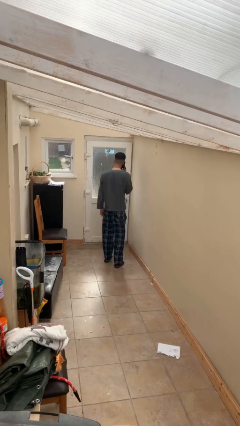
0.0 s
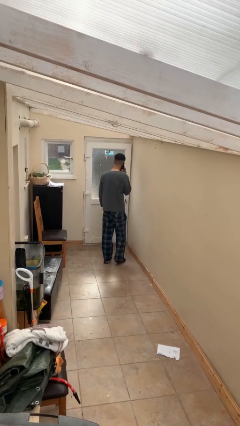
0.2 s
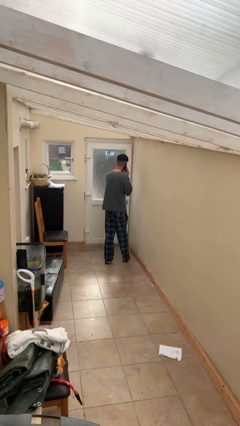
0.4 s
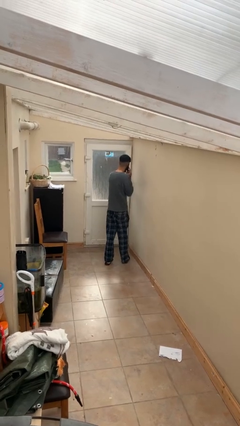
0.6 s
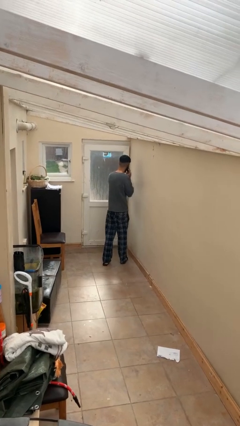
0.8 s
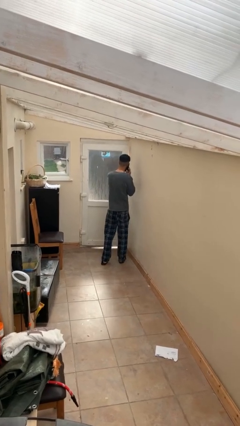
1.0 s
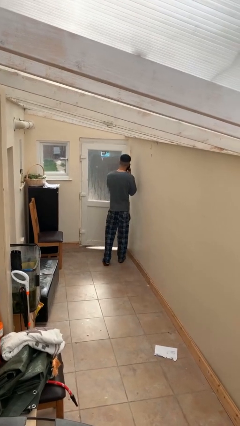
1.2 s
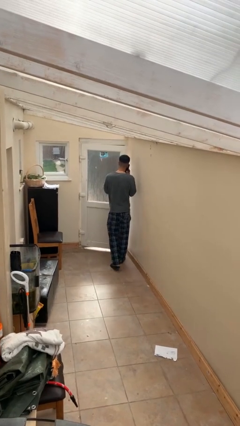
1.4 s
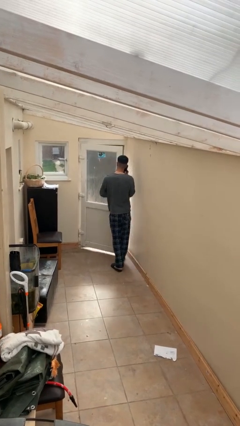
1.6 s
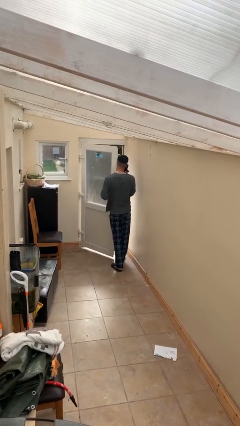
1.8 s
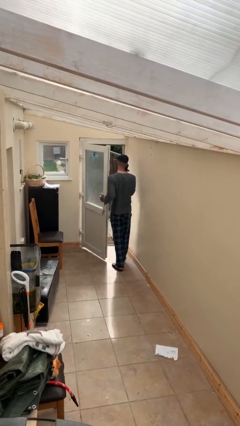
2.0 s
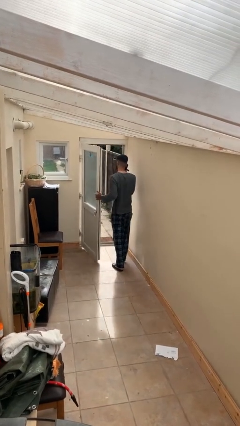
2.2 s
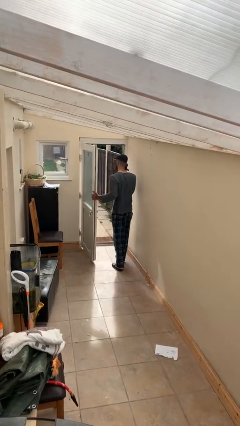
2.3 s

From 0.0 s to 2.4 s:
person opens facility door

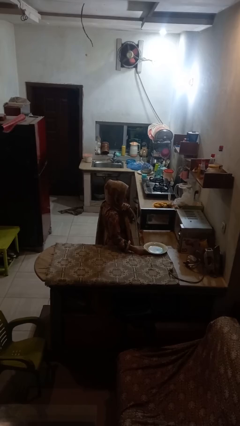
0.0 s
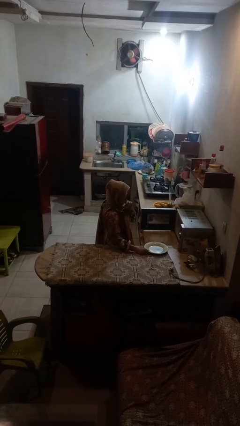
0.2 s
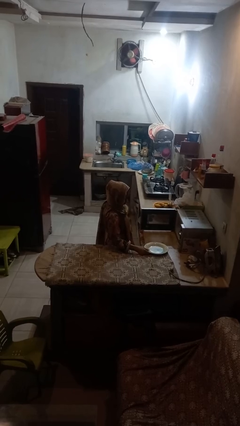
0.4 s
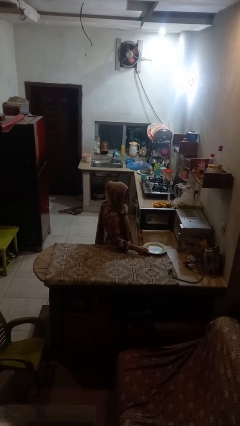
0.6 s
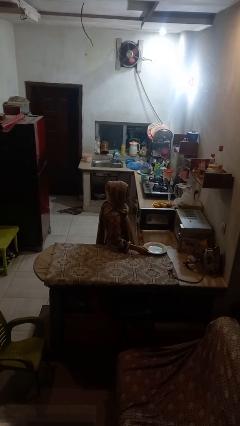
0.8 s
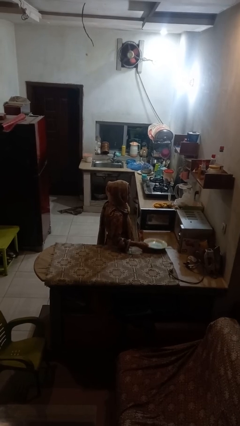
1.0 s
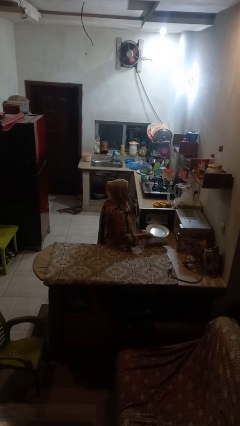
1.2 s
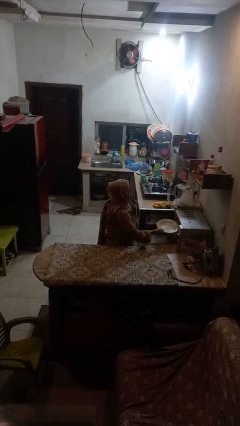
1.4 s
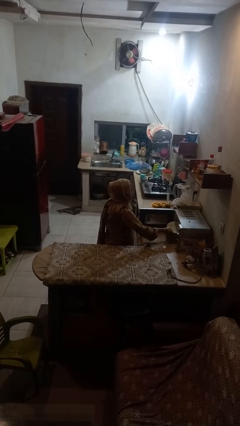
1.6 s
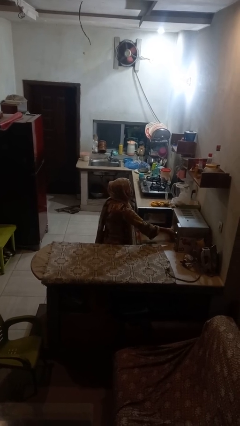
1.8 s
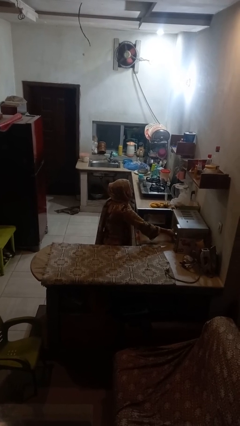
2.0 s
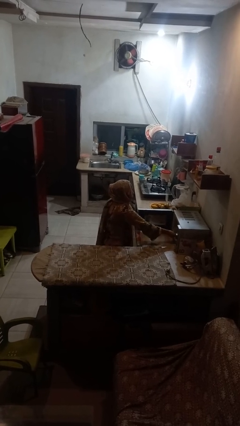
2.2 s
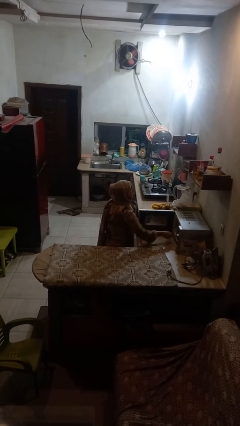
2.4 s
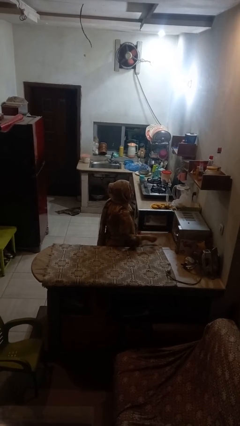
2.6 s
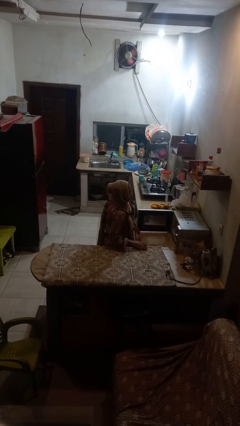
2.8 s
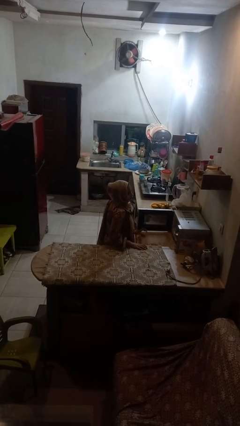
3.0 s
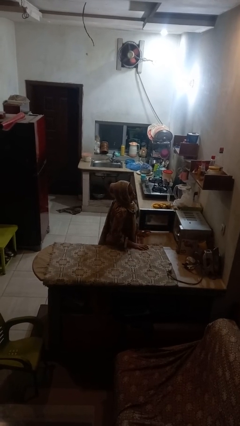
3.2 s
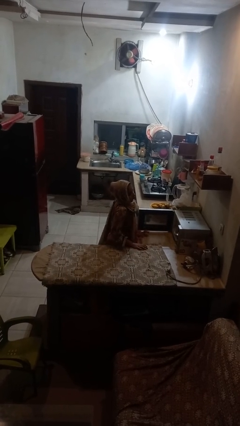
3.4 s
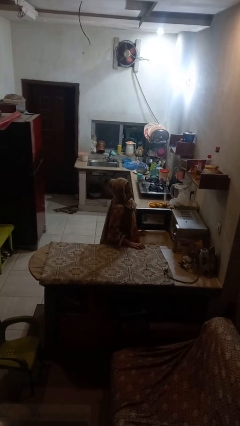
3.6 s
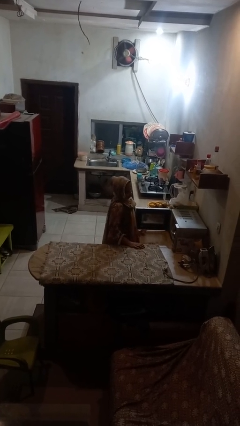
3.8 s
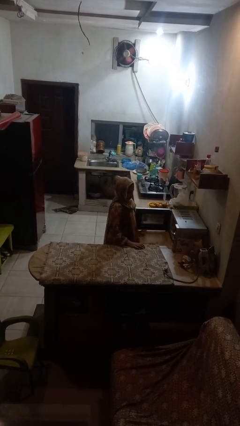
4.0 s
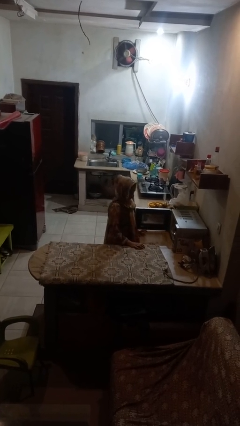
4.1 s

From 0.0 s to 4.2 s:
person puts object into microwave

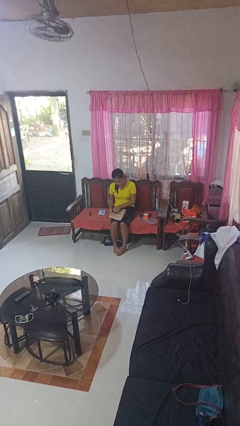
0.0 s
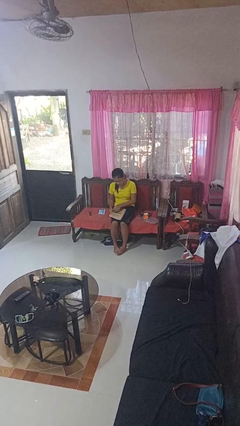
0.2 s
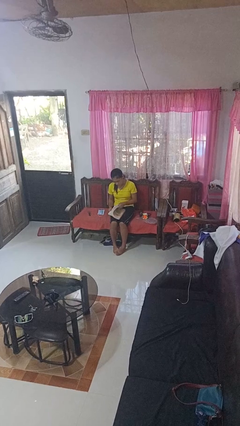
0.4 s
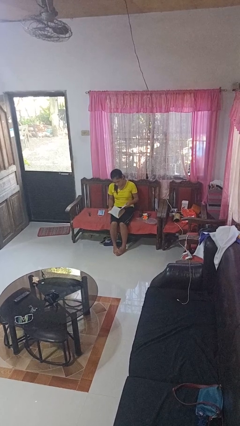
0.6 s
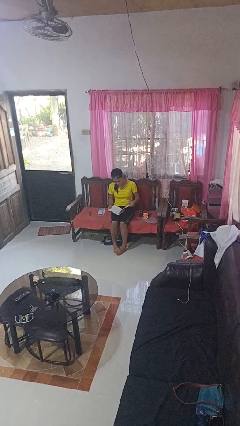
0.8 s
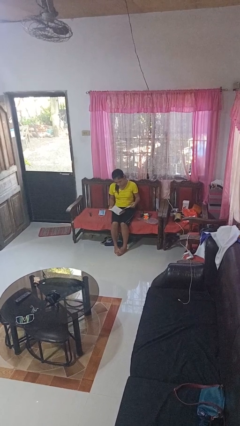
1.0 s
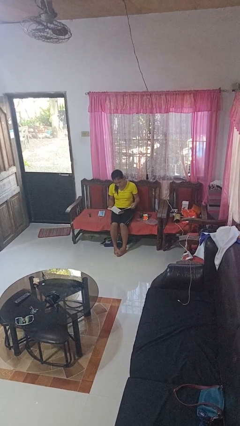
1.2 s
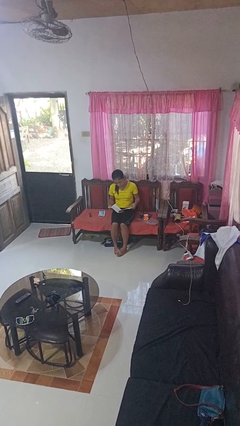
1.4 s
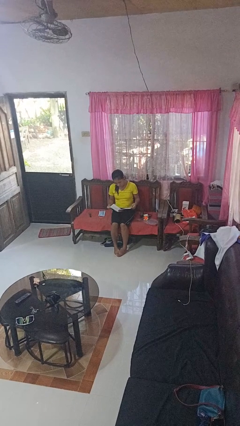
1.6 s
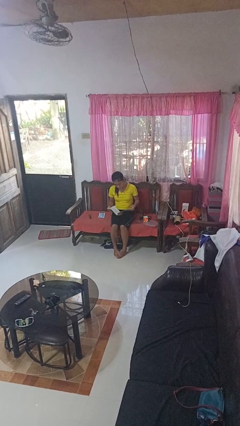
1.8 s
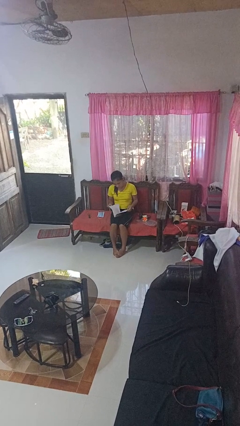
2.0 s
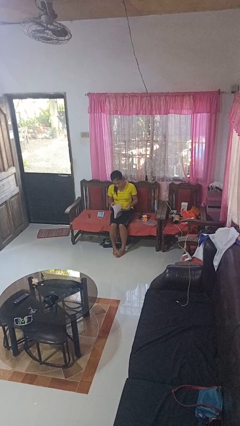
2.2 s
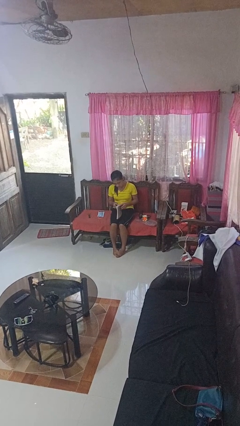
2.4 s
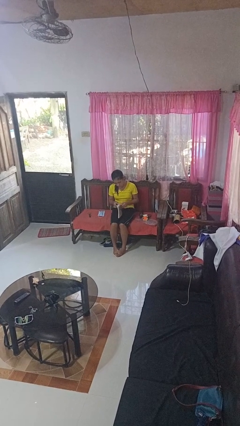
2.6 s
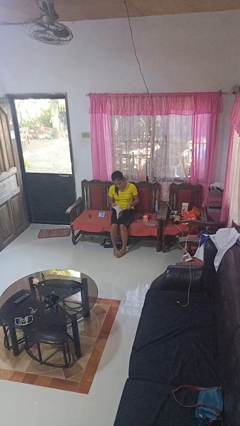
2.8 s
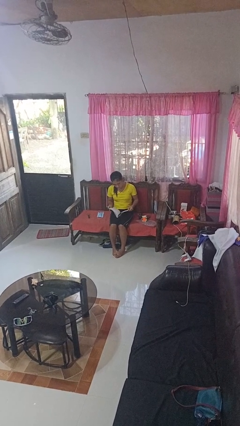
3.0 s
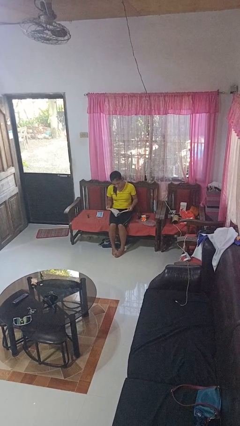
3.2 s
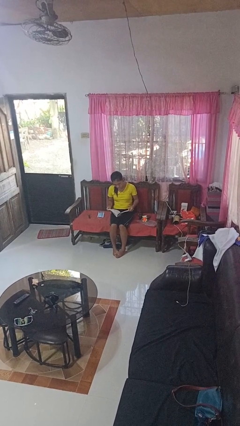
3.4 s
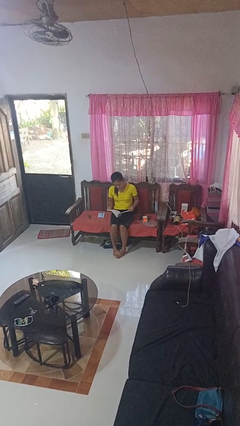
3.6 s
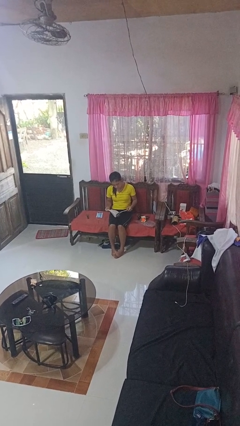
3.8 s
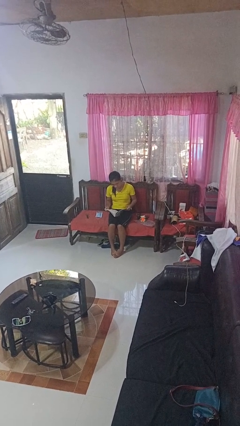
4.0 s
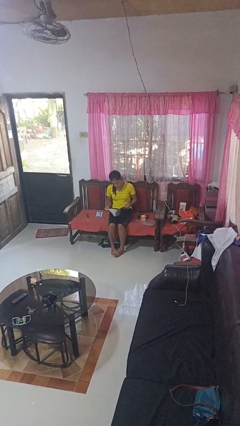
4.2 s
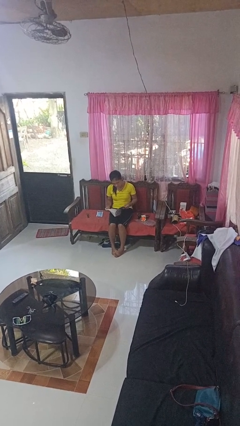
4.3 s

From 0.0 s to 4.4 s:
person reads book

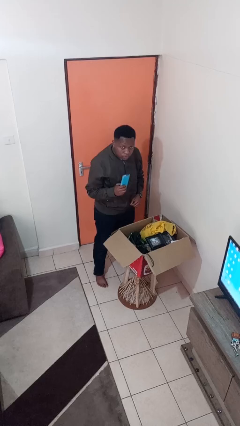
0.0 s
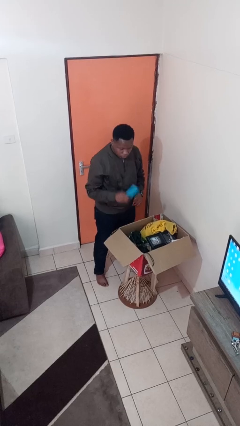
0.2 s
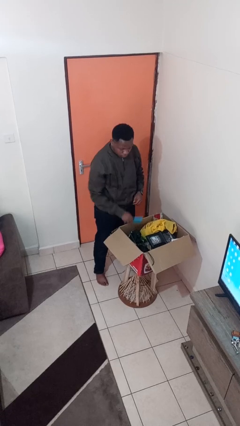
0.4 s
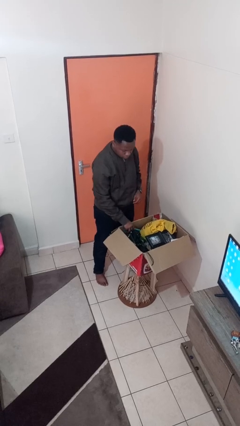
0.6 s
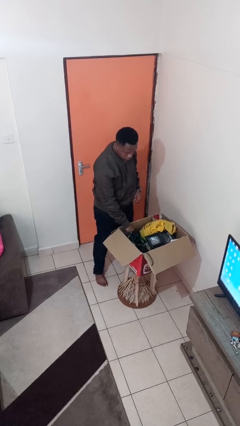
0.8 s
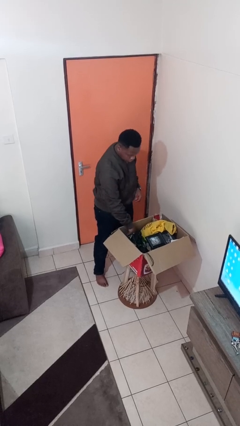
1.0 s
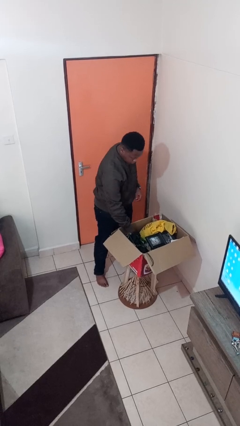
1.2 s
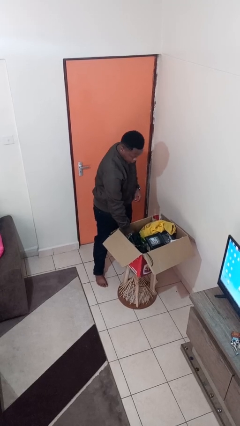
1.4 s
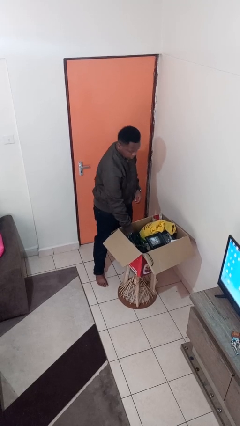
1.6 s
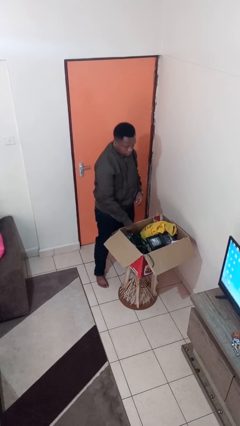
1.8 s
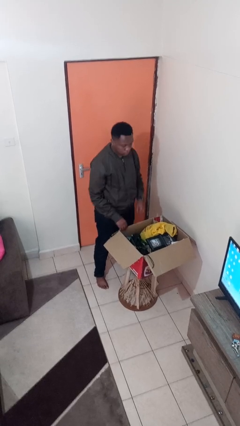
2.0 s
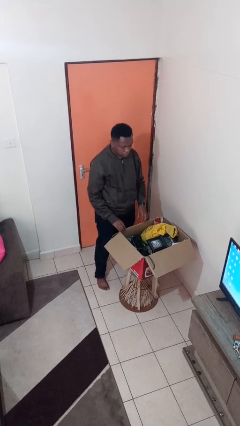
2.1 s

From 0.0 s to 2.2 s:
person puts object into box

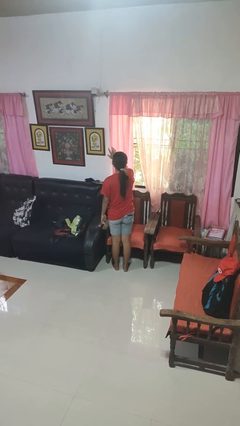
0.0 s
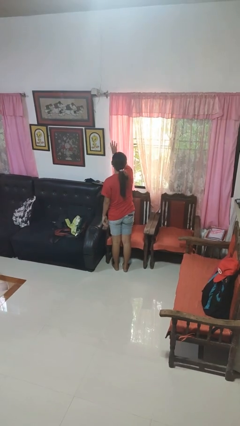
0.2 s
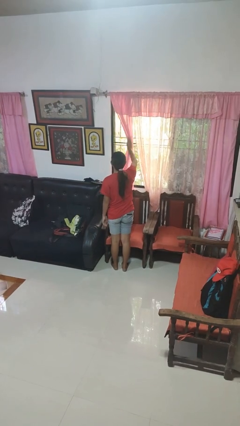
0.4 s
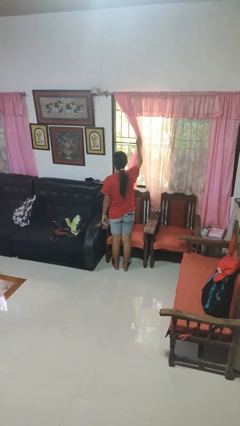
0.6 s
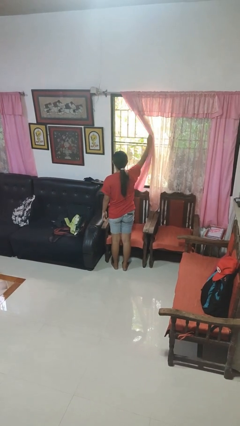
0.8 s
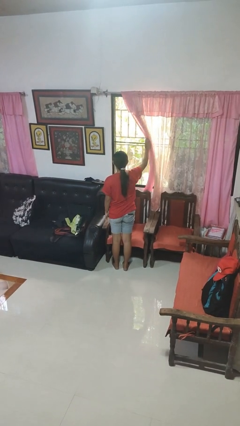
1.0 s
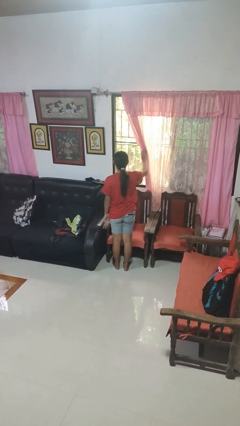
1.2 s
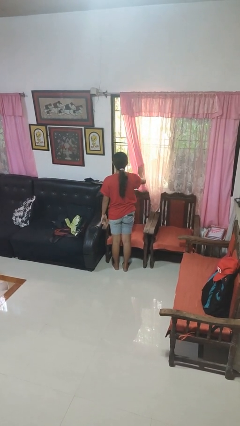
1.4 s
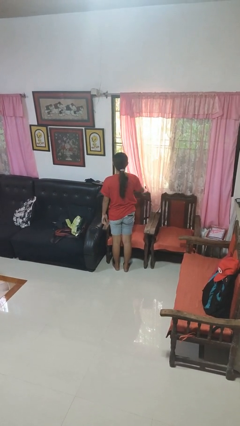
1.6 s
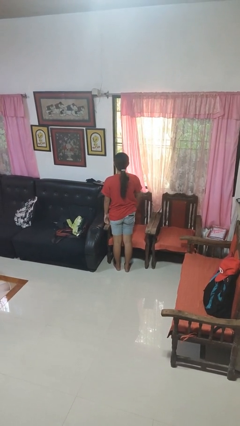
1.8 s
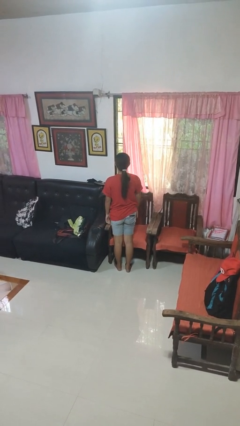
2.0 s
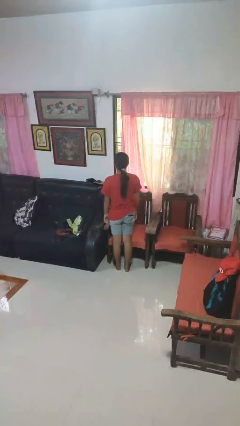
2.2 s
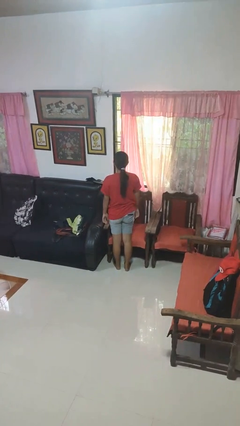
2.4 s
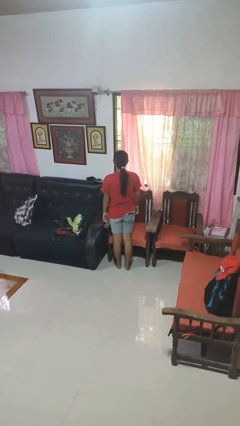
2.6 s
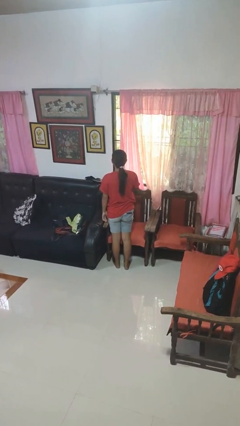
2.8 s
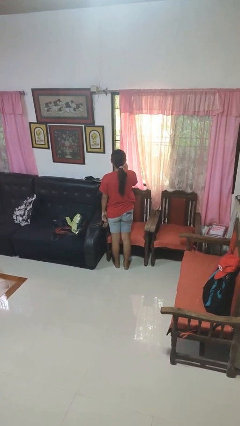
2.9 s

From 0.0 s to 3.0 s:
person opens curtains

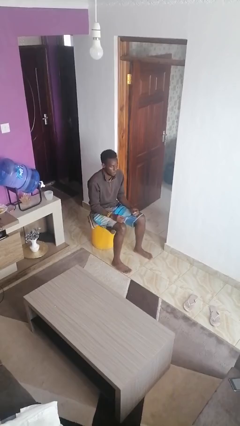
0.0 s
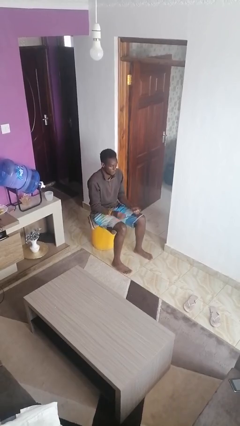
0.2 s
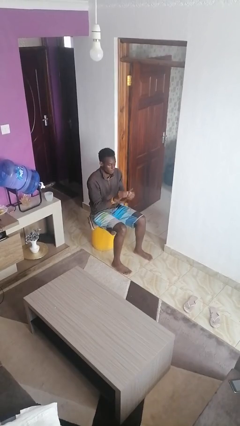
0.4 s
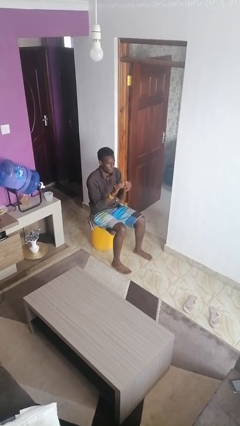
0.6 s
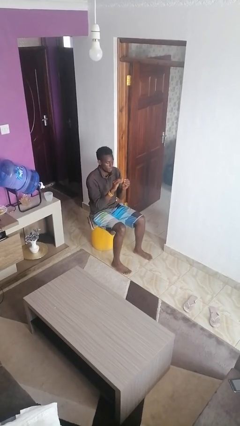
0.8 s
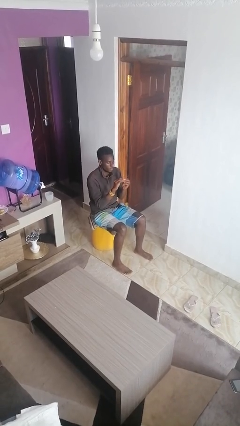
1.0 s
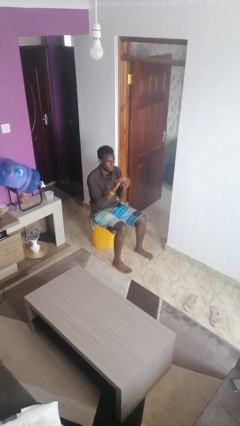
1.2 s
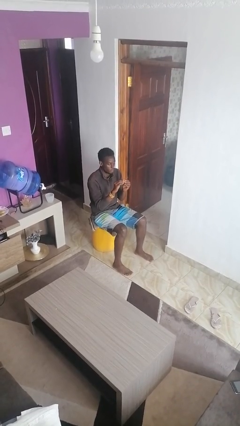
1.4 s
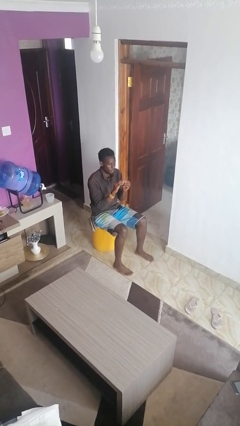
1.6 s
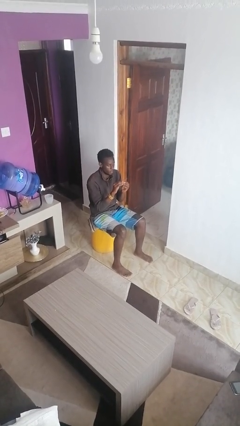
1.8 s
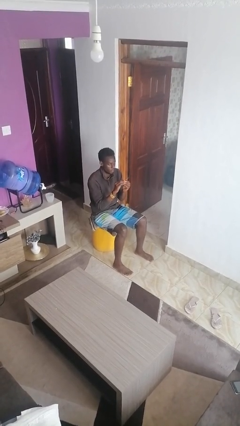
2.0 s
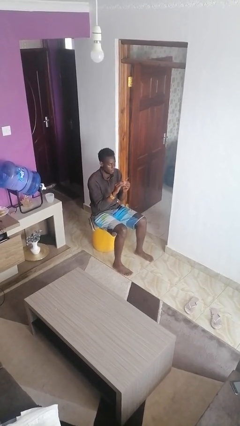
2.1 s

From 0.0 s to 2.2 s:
person files fingernails
